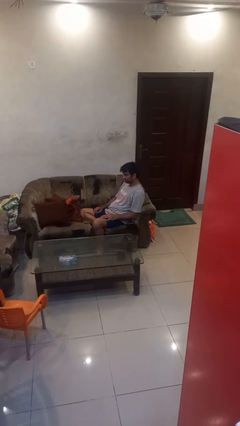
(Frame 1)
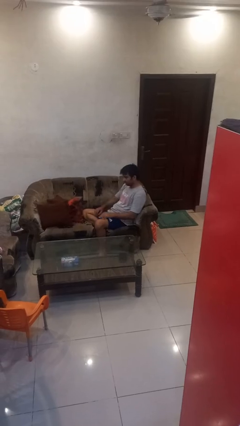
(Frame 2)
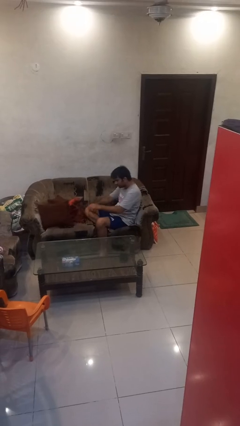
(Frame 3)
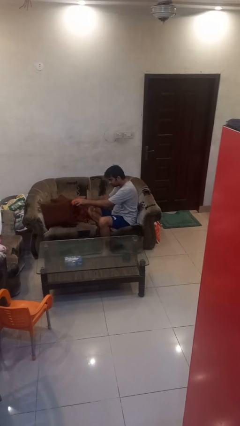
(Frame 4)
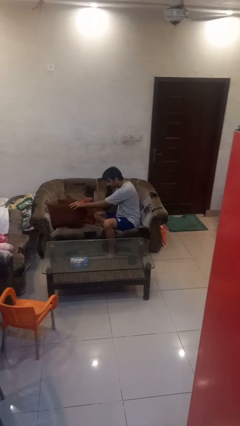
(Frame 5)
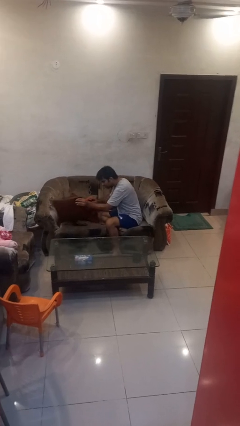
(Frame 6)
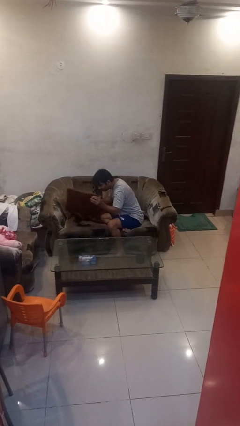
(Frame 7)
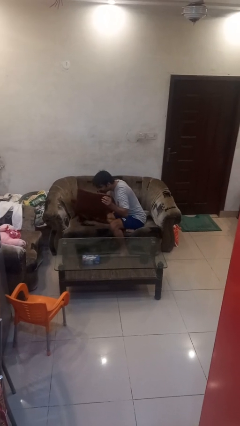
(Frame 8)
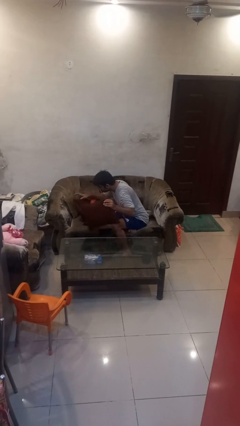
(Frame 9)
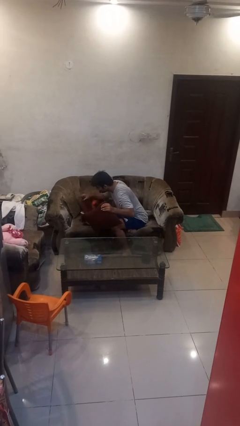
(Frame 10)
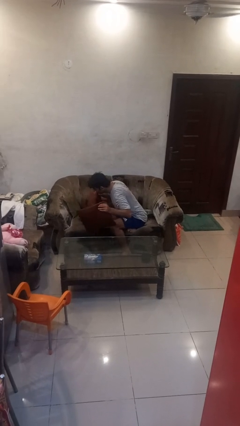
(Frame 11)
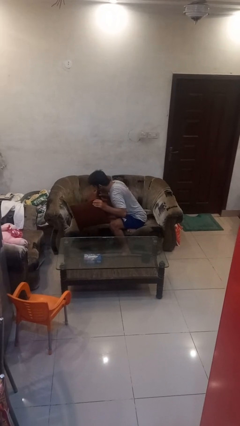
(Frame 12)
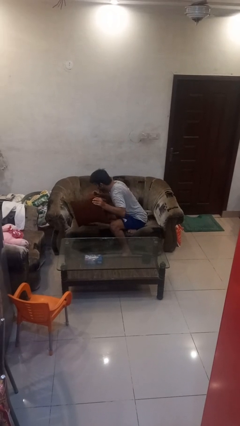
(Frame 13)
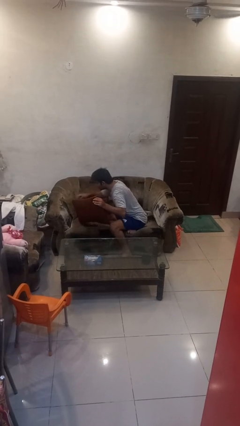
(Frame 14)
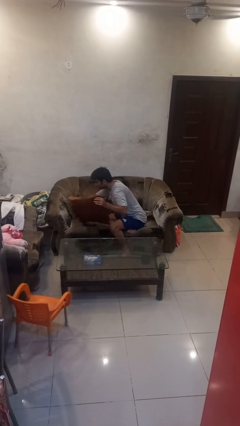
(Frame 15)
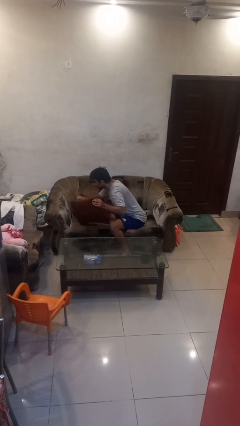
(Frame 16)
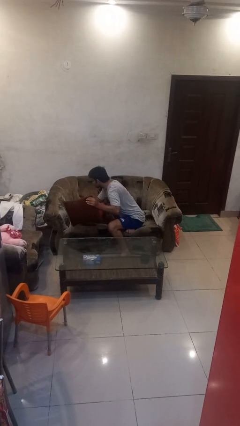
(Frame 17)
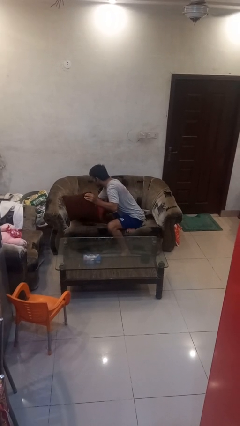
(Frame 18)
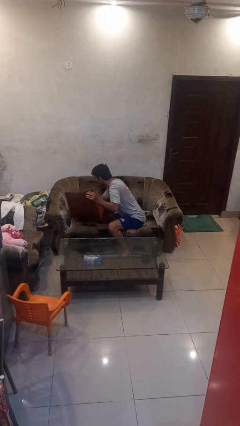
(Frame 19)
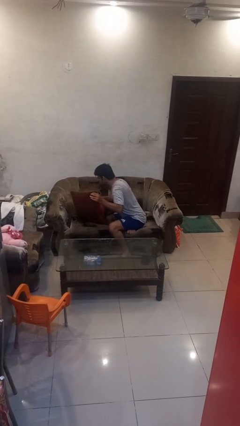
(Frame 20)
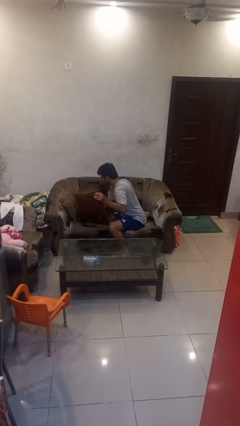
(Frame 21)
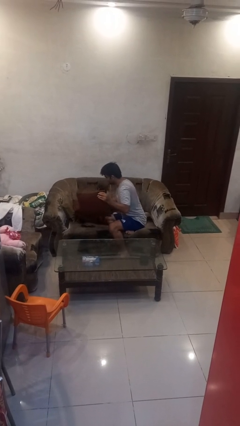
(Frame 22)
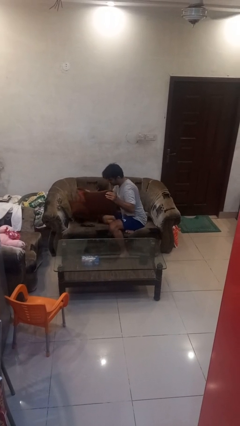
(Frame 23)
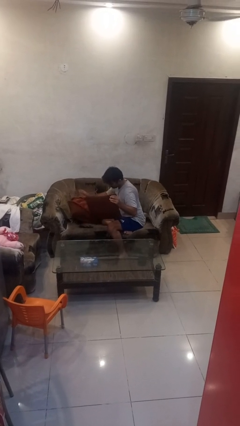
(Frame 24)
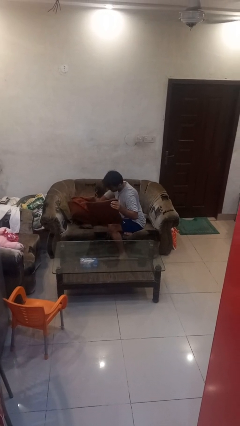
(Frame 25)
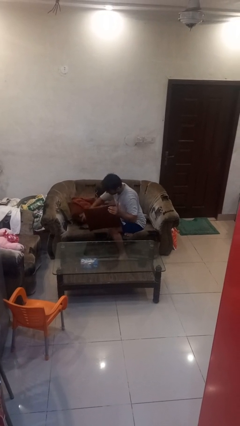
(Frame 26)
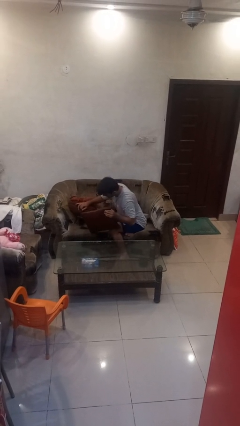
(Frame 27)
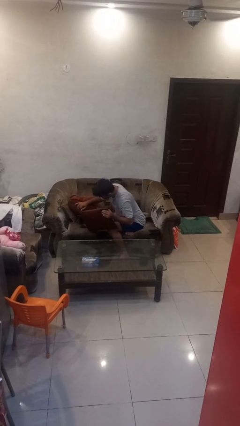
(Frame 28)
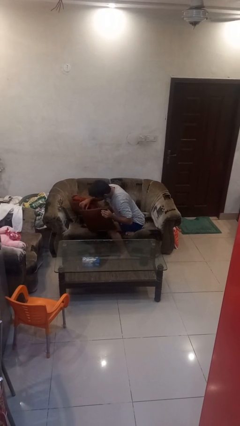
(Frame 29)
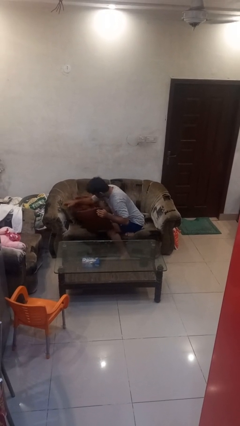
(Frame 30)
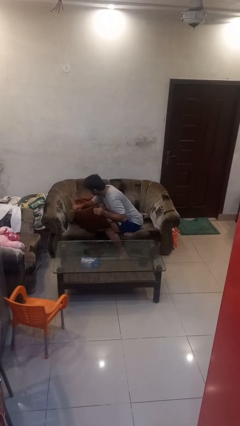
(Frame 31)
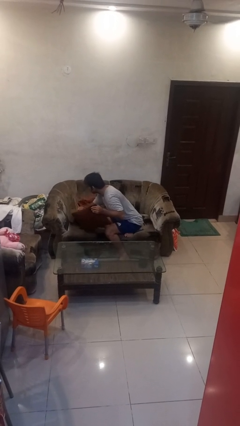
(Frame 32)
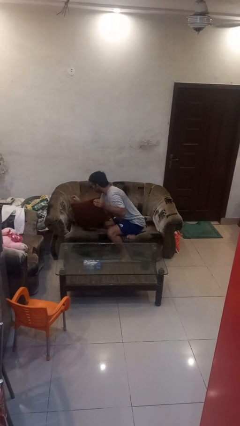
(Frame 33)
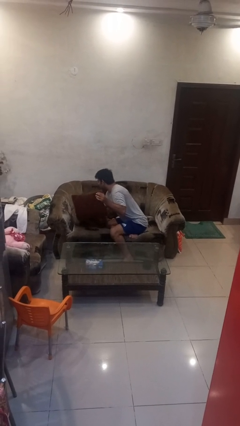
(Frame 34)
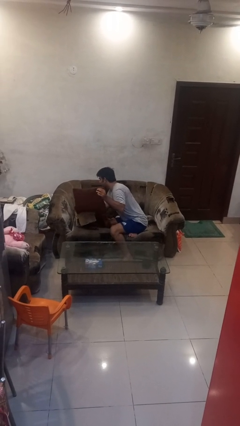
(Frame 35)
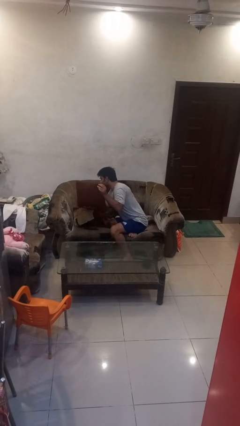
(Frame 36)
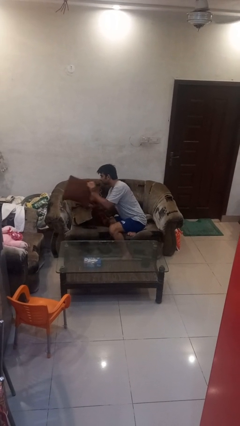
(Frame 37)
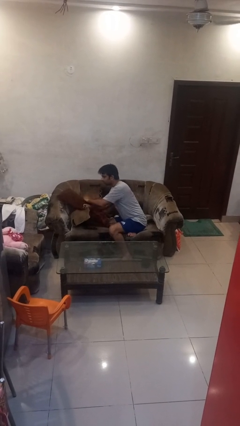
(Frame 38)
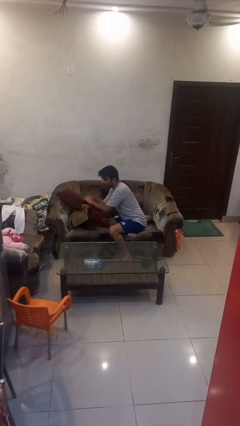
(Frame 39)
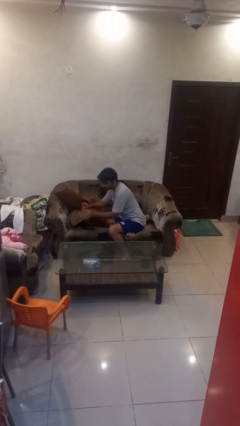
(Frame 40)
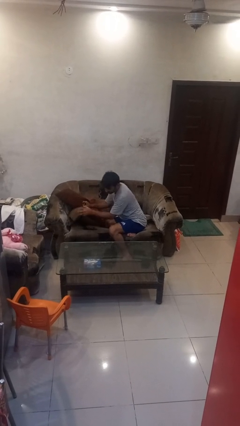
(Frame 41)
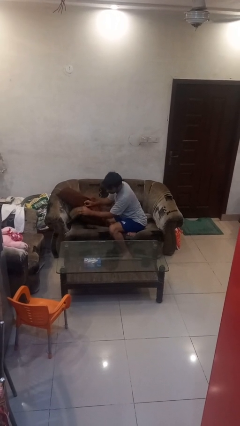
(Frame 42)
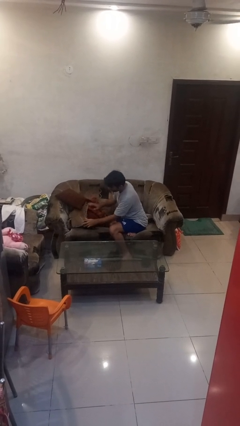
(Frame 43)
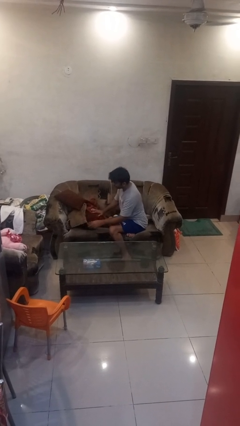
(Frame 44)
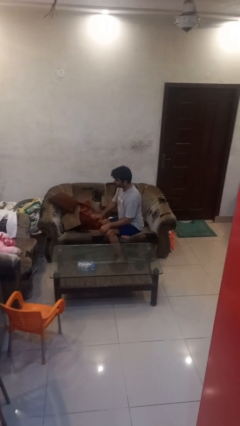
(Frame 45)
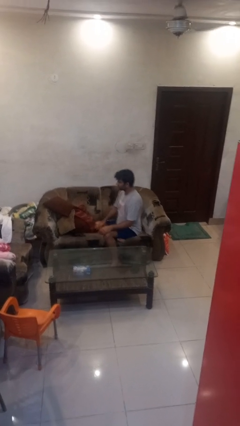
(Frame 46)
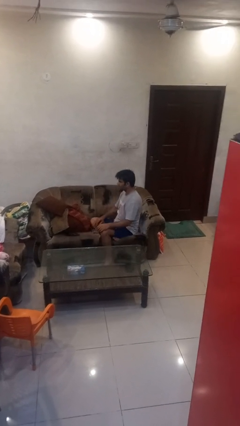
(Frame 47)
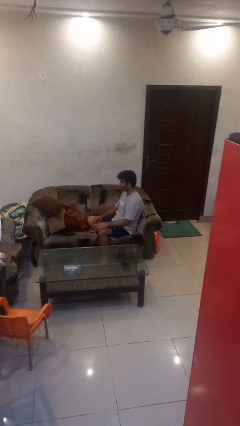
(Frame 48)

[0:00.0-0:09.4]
person searches in couch

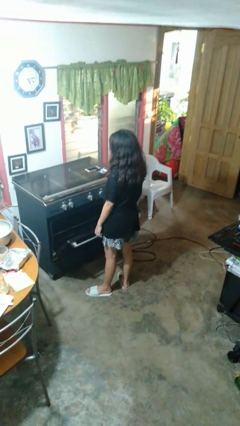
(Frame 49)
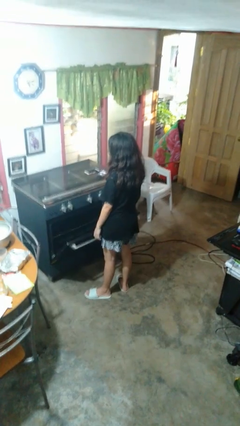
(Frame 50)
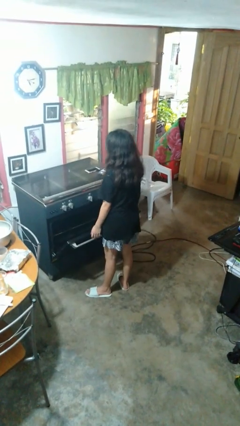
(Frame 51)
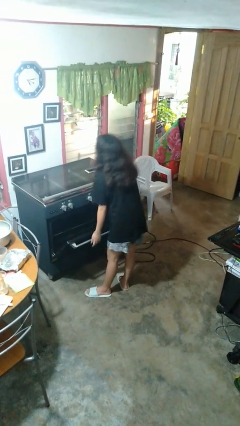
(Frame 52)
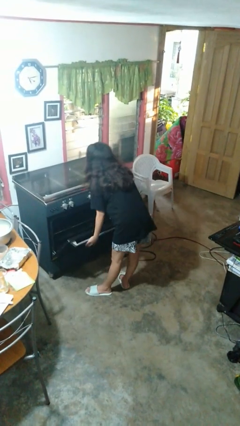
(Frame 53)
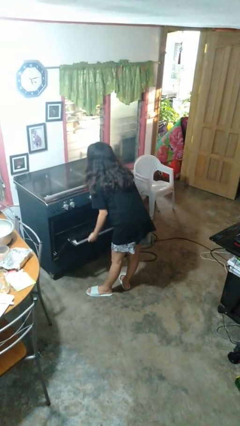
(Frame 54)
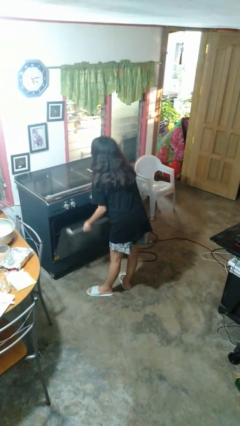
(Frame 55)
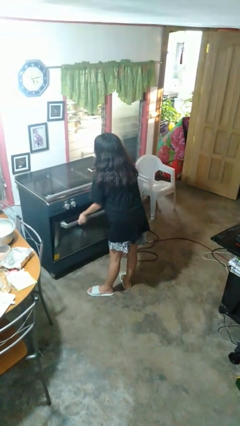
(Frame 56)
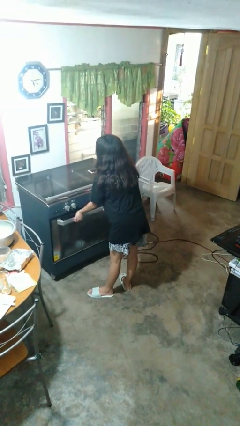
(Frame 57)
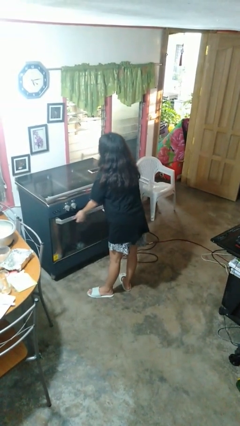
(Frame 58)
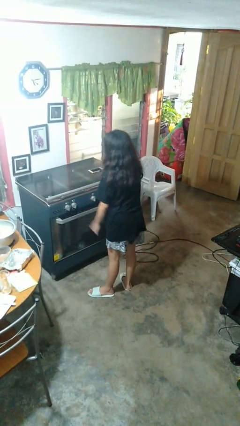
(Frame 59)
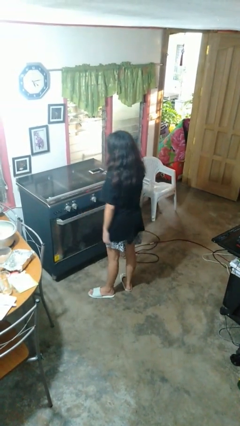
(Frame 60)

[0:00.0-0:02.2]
person closes oven door

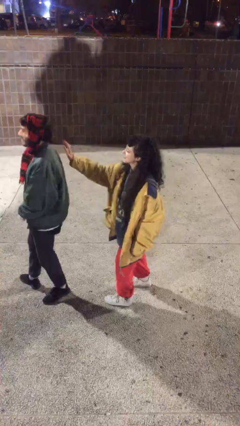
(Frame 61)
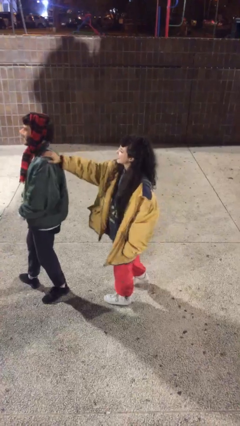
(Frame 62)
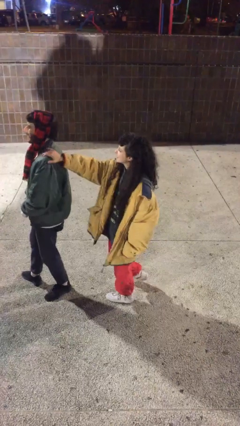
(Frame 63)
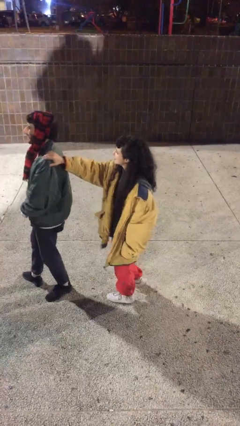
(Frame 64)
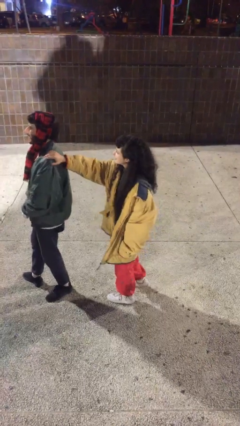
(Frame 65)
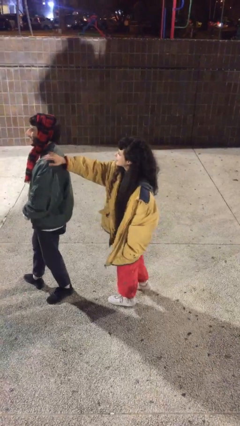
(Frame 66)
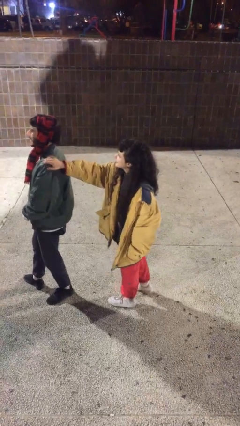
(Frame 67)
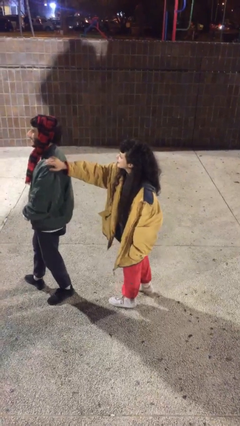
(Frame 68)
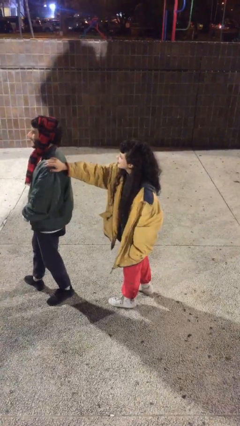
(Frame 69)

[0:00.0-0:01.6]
person grabs person by shoulder

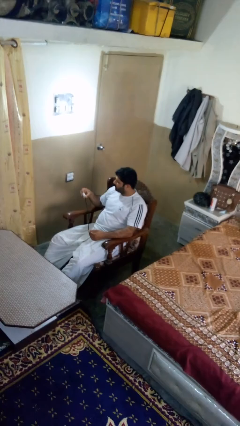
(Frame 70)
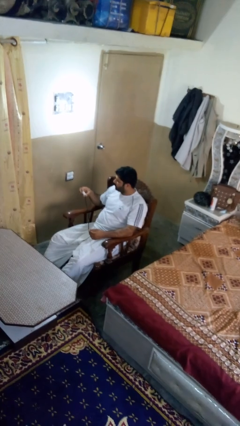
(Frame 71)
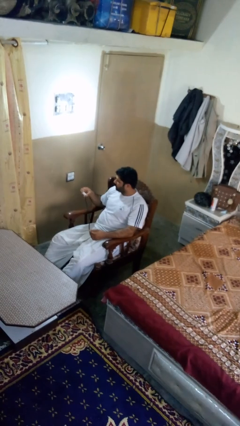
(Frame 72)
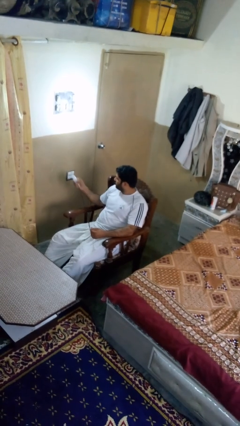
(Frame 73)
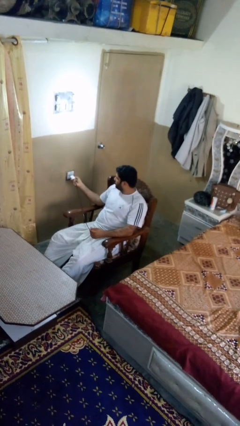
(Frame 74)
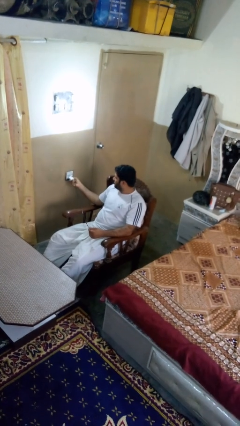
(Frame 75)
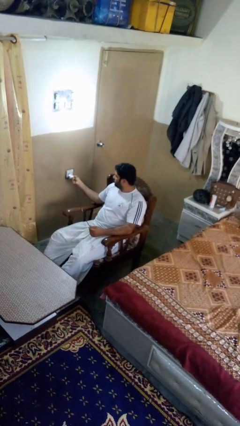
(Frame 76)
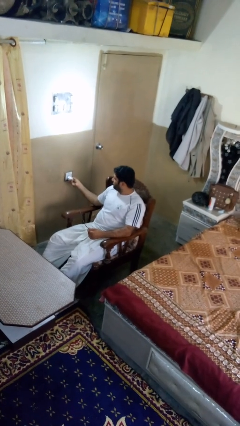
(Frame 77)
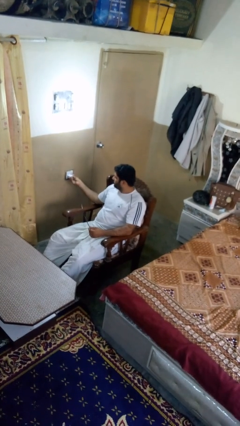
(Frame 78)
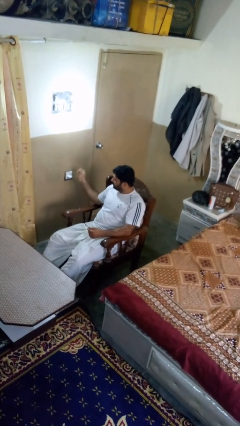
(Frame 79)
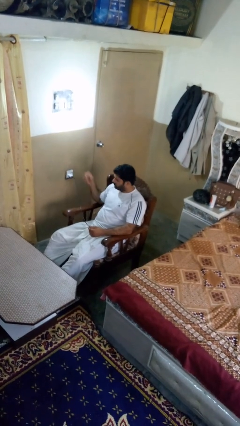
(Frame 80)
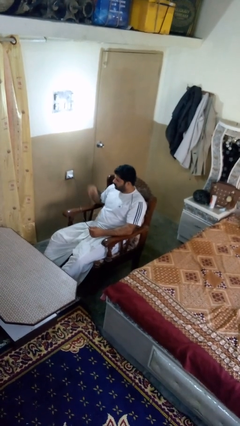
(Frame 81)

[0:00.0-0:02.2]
person plugs into electrical socket

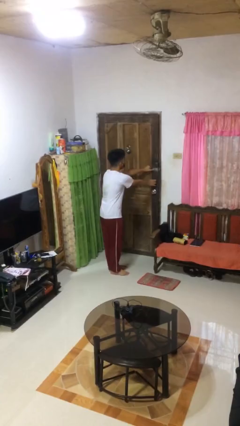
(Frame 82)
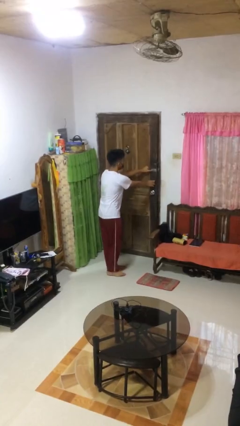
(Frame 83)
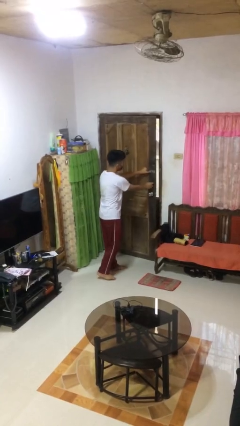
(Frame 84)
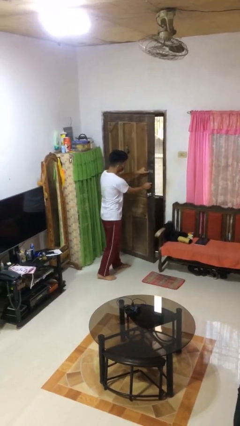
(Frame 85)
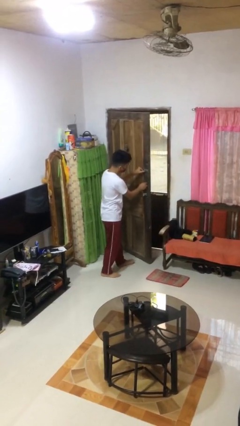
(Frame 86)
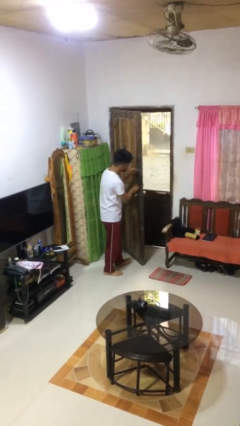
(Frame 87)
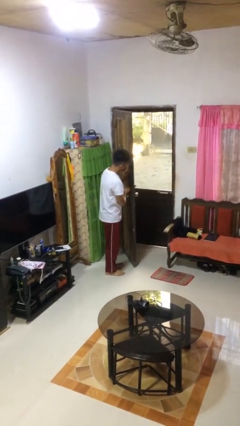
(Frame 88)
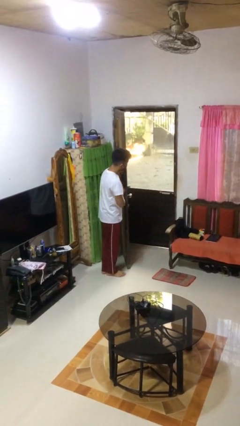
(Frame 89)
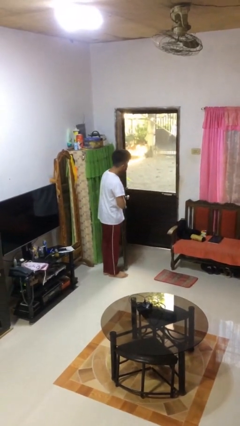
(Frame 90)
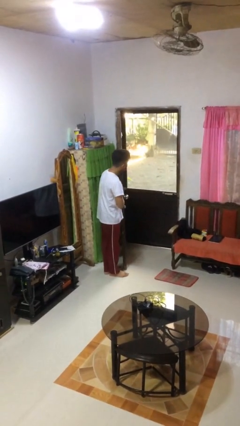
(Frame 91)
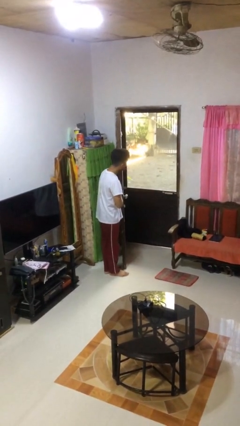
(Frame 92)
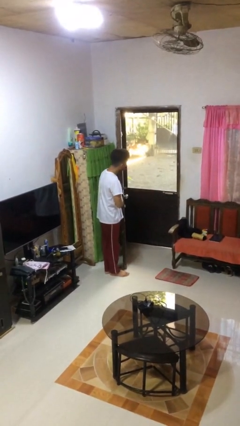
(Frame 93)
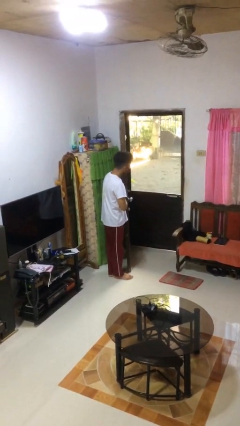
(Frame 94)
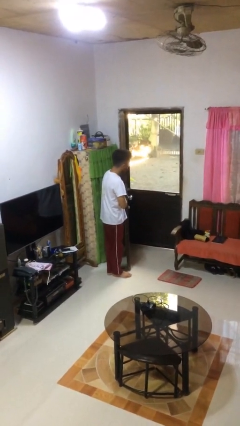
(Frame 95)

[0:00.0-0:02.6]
person opens facility door
